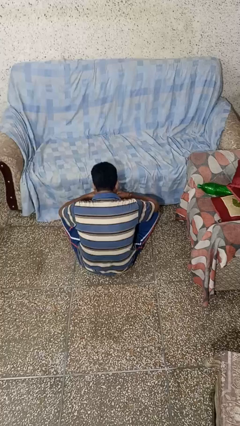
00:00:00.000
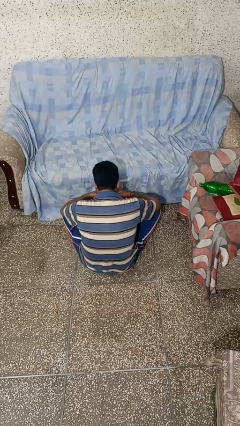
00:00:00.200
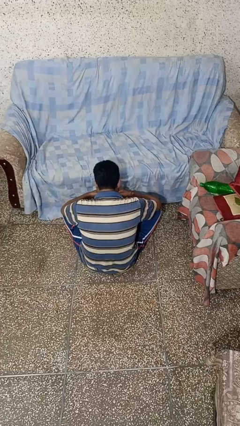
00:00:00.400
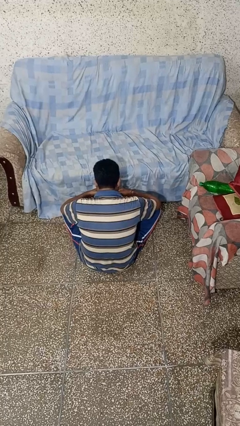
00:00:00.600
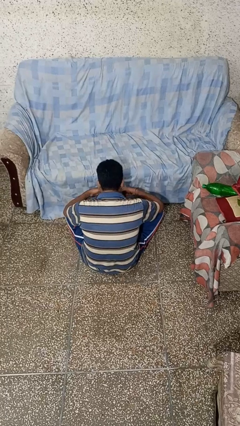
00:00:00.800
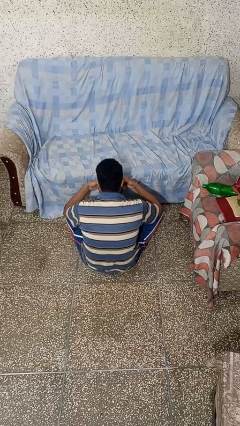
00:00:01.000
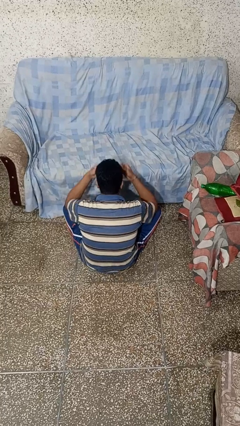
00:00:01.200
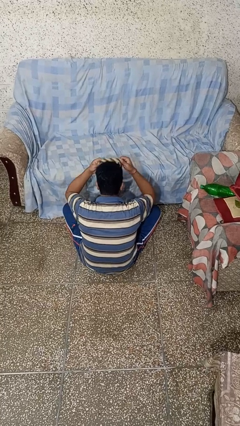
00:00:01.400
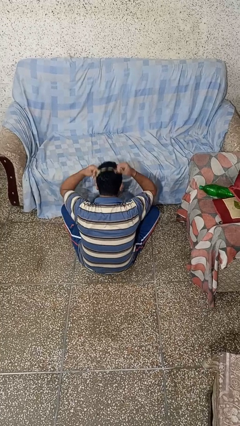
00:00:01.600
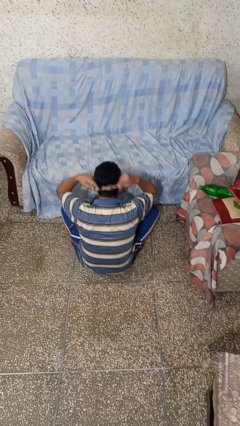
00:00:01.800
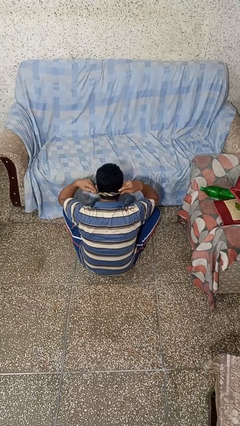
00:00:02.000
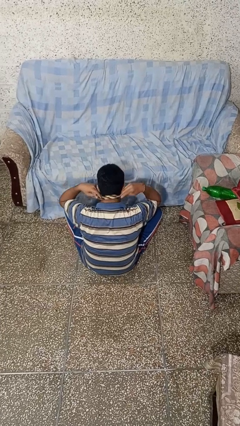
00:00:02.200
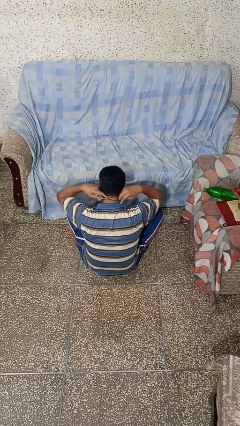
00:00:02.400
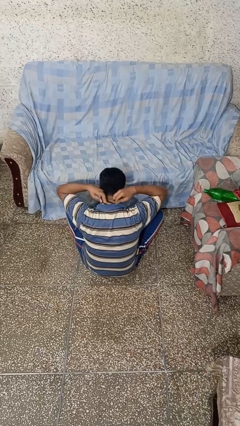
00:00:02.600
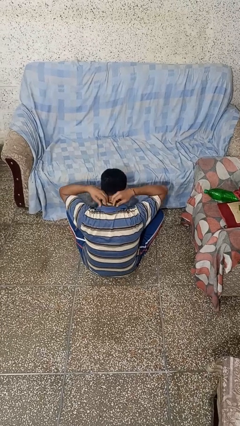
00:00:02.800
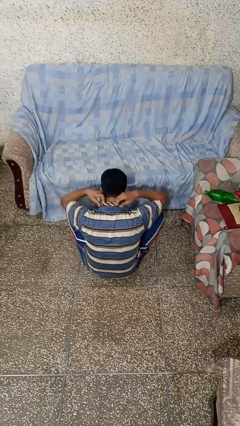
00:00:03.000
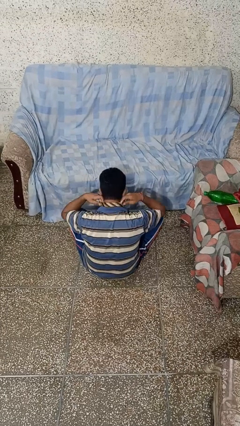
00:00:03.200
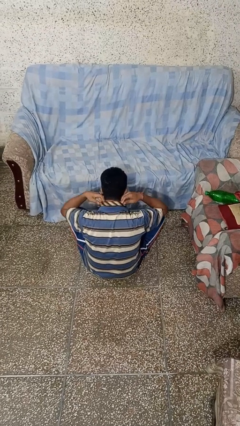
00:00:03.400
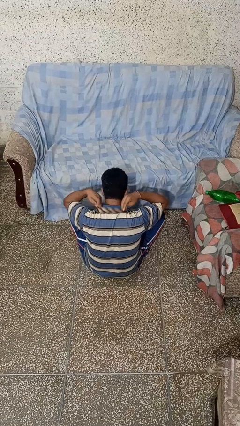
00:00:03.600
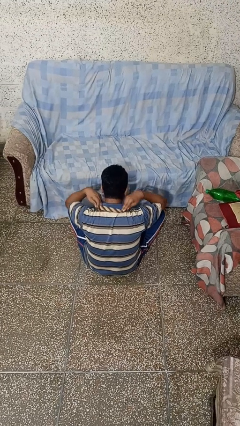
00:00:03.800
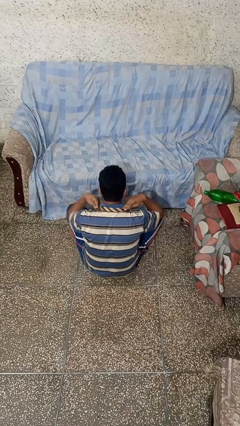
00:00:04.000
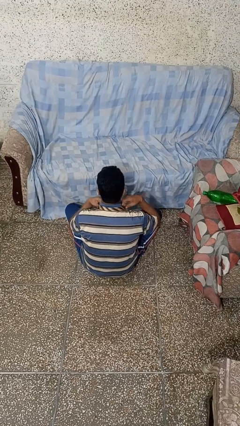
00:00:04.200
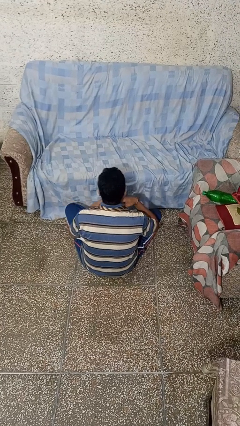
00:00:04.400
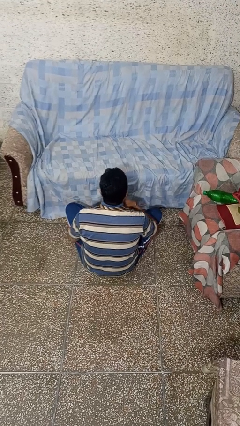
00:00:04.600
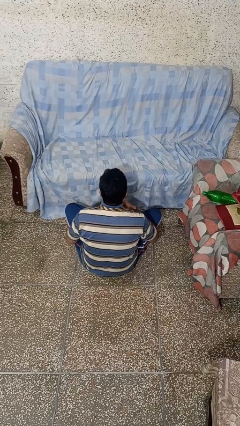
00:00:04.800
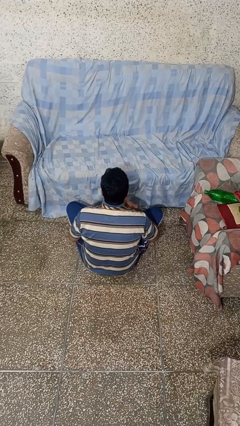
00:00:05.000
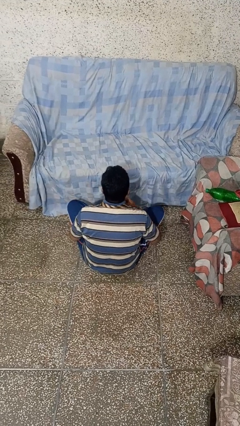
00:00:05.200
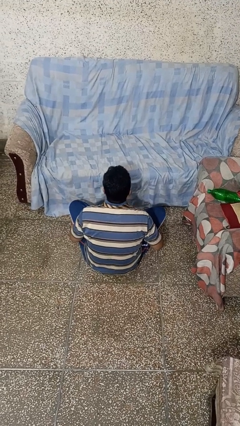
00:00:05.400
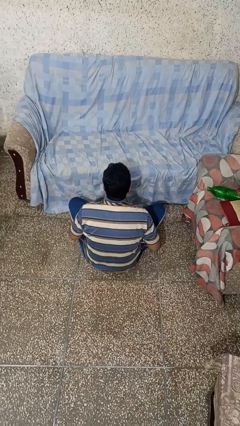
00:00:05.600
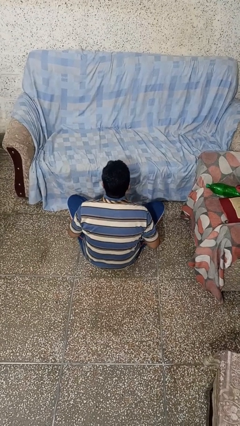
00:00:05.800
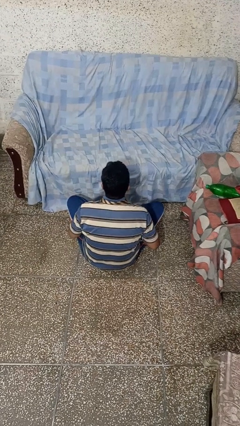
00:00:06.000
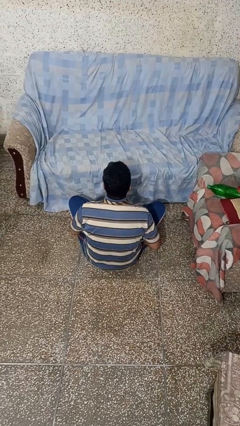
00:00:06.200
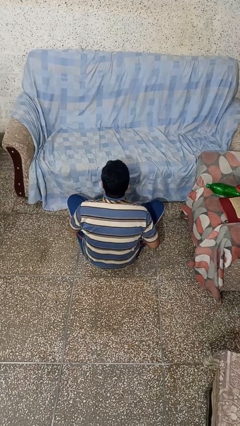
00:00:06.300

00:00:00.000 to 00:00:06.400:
person puts on necktie

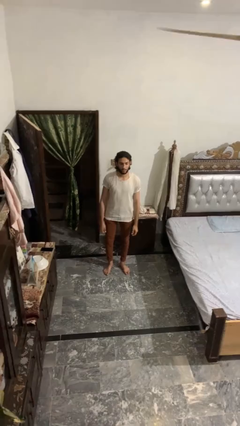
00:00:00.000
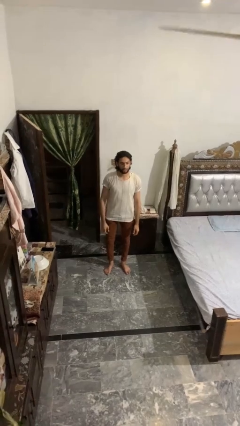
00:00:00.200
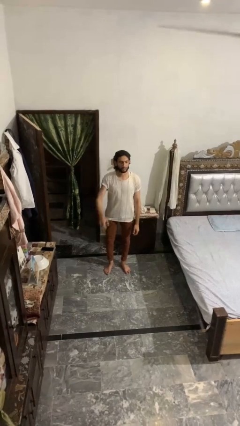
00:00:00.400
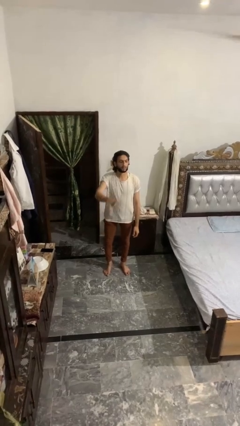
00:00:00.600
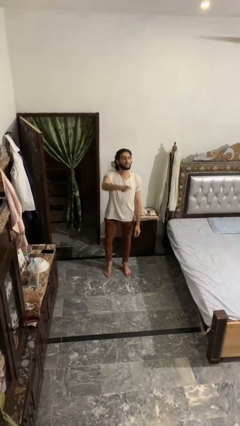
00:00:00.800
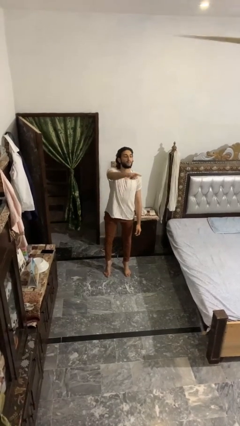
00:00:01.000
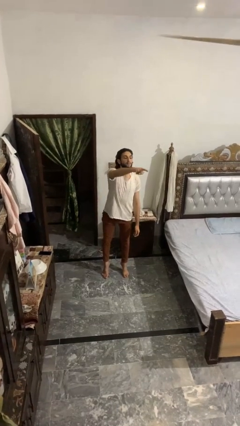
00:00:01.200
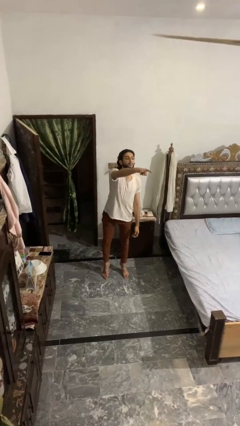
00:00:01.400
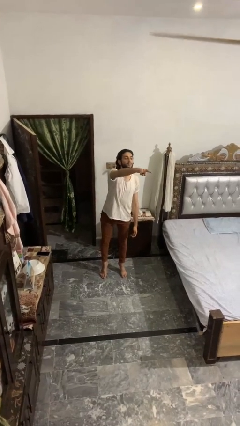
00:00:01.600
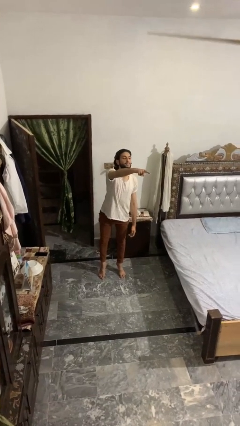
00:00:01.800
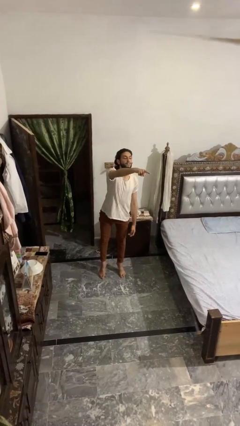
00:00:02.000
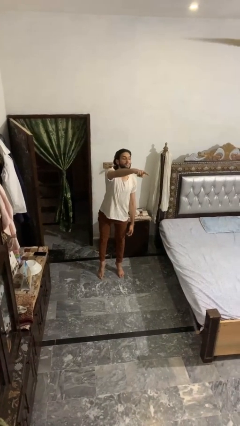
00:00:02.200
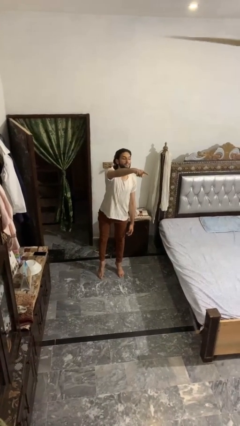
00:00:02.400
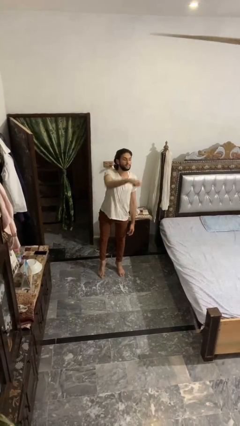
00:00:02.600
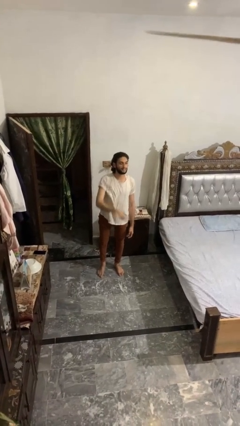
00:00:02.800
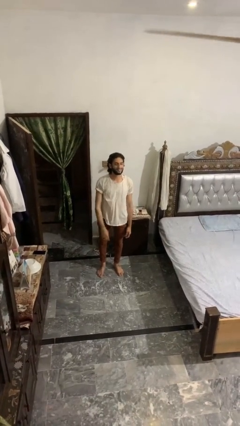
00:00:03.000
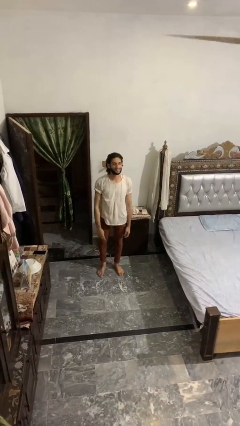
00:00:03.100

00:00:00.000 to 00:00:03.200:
person points at person

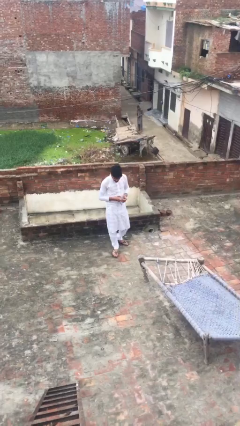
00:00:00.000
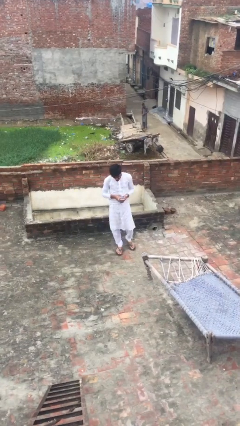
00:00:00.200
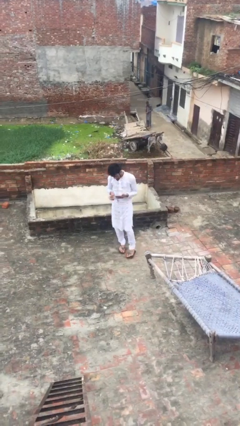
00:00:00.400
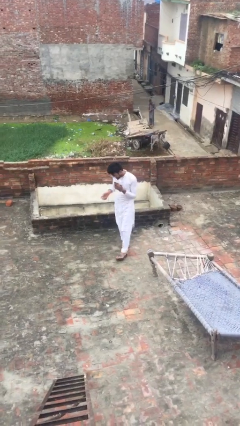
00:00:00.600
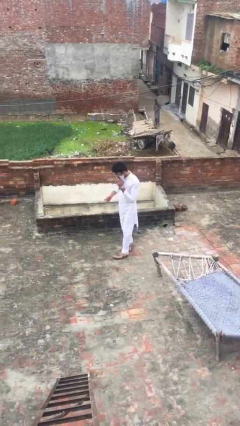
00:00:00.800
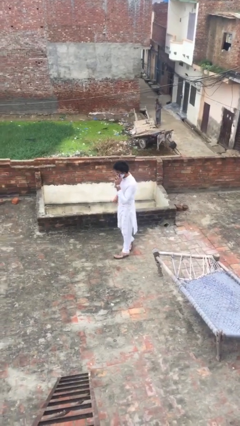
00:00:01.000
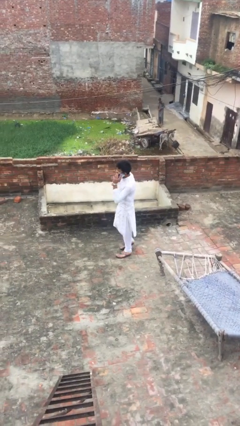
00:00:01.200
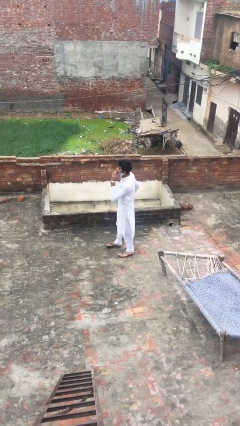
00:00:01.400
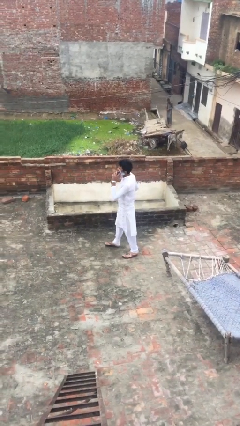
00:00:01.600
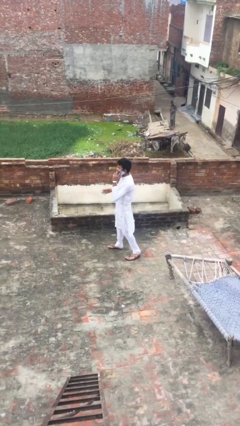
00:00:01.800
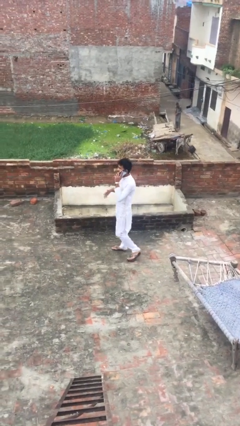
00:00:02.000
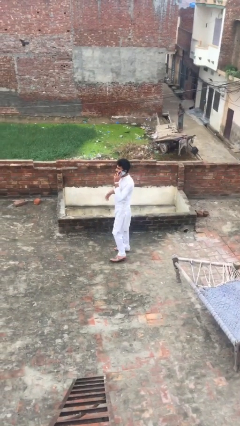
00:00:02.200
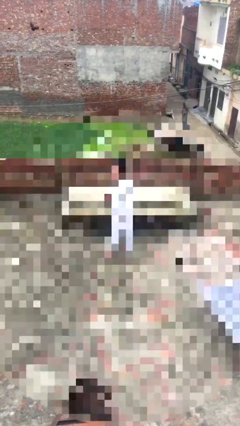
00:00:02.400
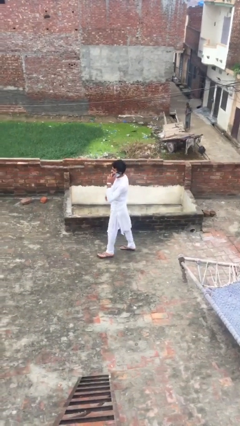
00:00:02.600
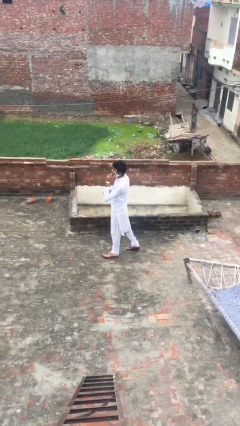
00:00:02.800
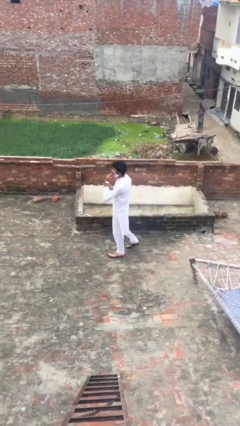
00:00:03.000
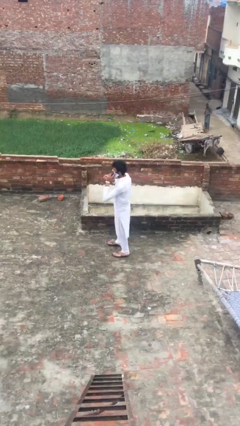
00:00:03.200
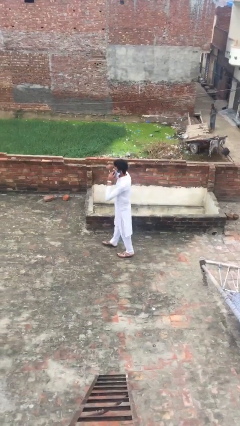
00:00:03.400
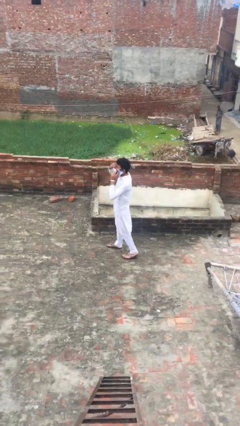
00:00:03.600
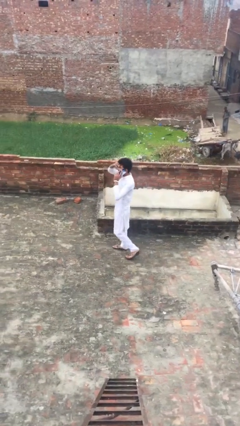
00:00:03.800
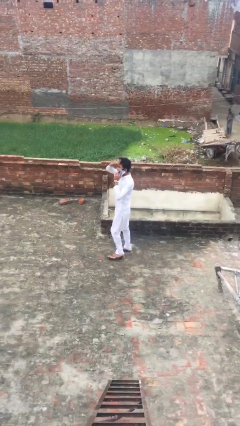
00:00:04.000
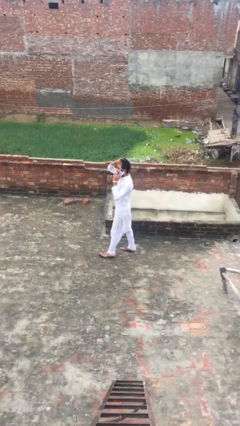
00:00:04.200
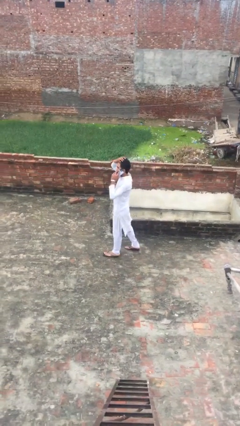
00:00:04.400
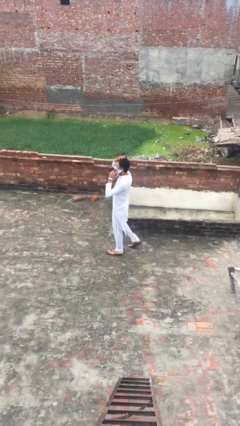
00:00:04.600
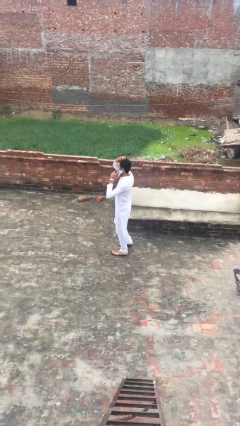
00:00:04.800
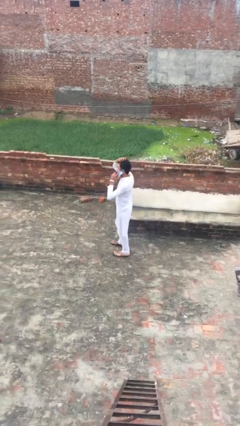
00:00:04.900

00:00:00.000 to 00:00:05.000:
person talks on phone

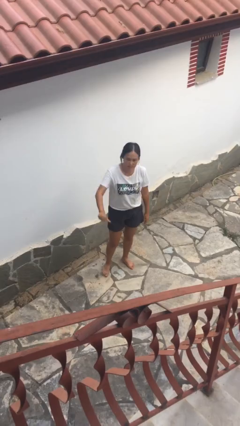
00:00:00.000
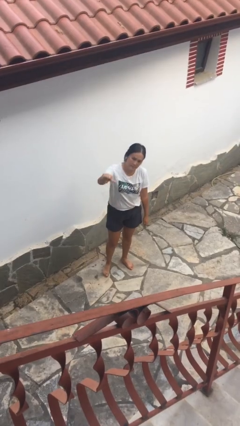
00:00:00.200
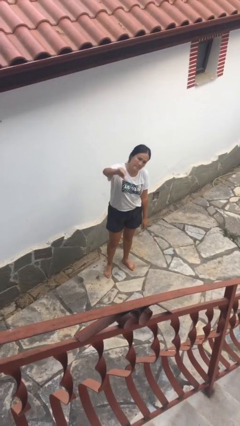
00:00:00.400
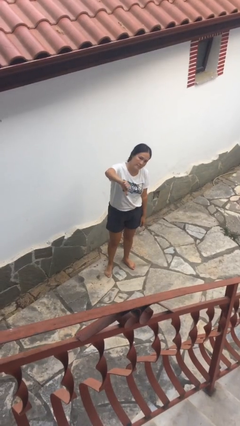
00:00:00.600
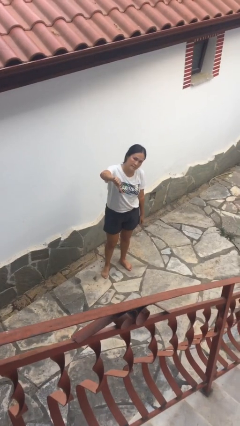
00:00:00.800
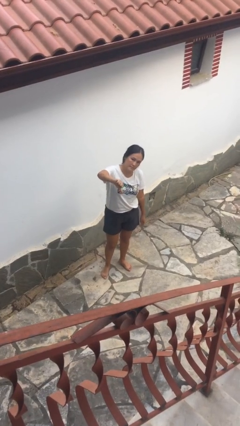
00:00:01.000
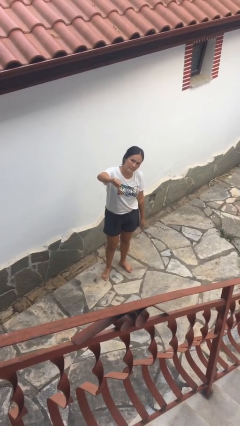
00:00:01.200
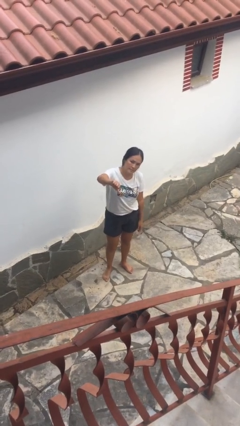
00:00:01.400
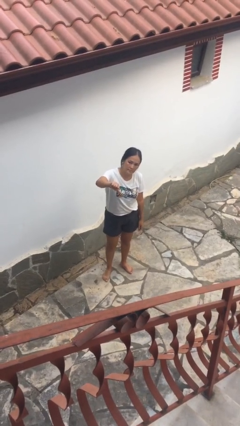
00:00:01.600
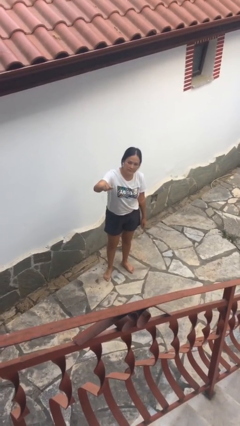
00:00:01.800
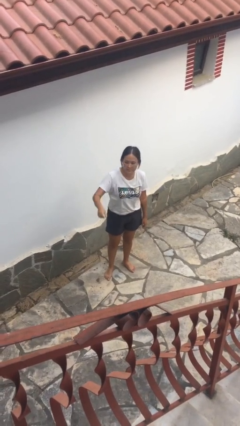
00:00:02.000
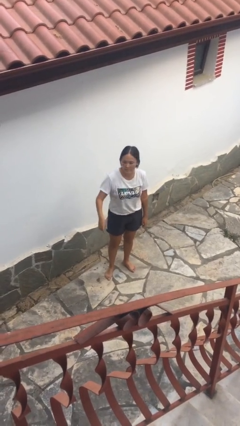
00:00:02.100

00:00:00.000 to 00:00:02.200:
person gestures thumbs down

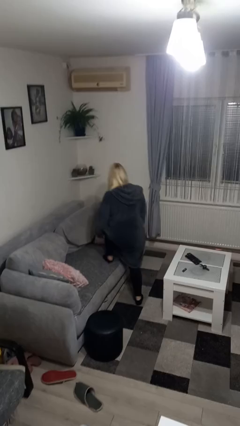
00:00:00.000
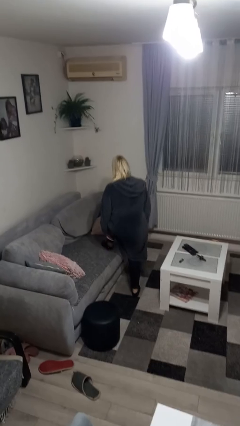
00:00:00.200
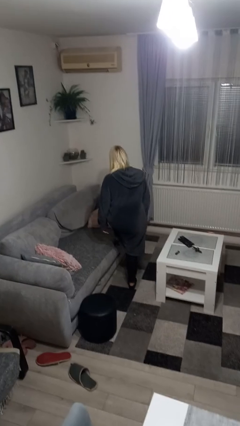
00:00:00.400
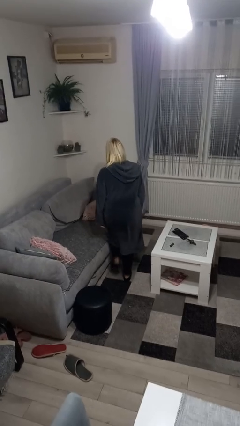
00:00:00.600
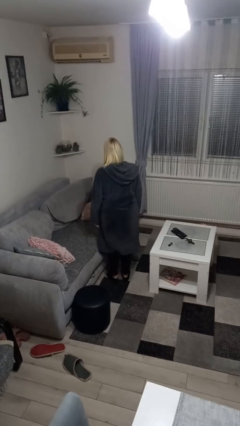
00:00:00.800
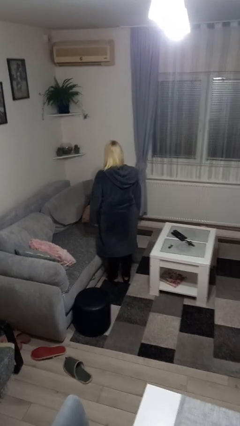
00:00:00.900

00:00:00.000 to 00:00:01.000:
person climbs off couch
